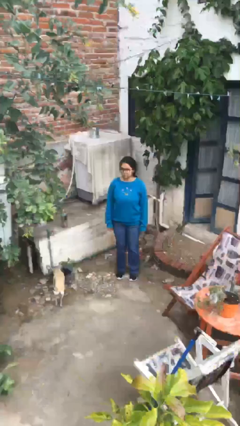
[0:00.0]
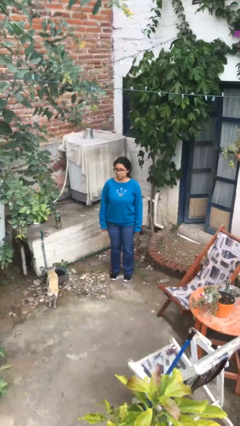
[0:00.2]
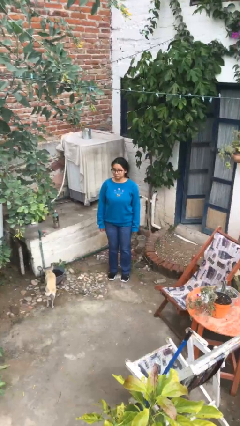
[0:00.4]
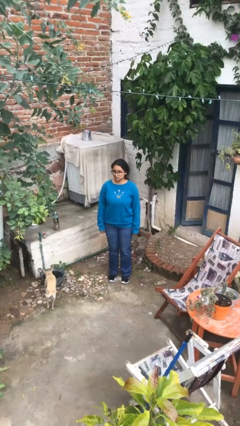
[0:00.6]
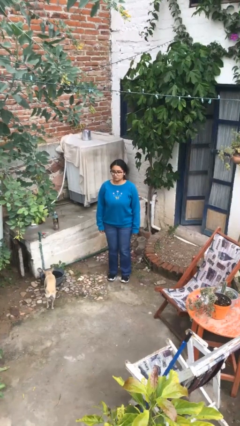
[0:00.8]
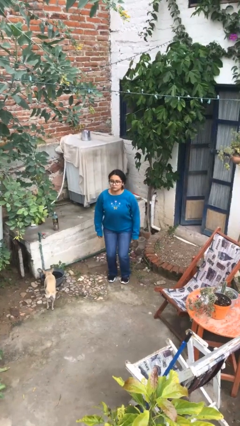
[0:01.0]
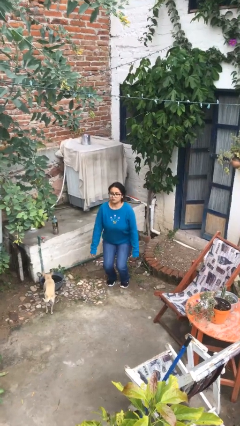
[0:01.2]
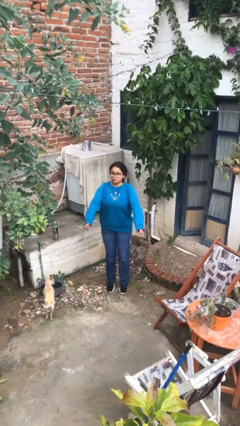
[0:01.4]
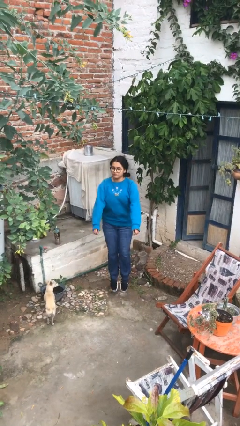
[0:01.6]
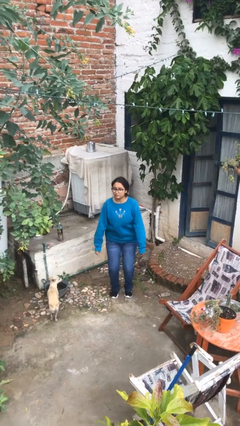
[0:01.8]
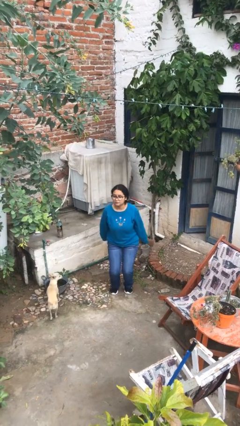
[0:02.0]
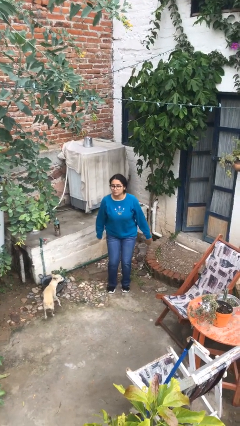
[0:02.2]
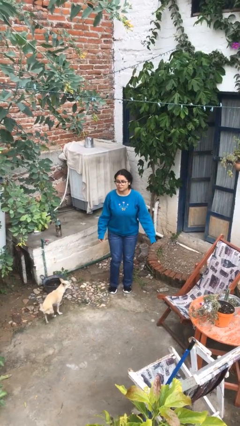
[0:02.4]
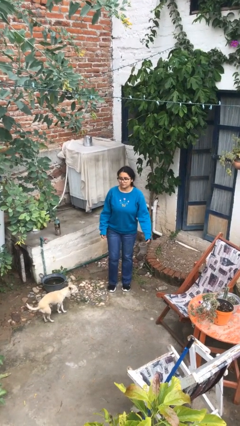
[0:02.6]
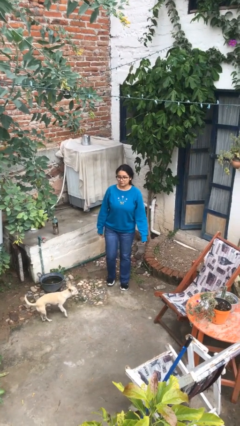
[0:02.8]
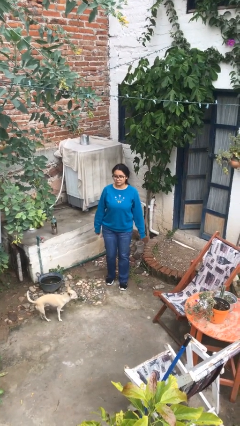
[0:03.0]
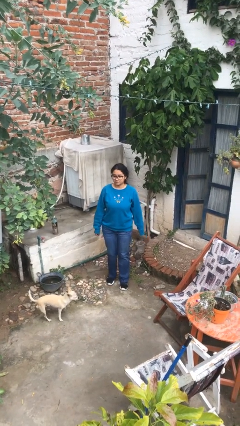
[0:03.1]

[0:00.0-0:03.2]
person jumps

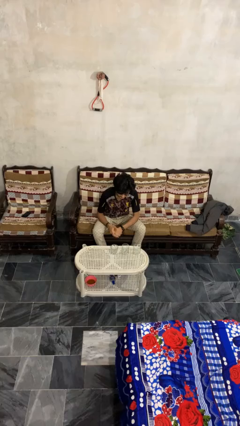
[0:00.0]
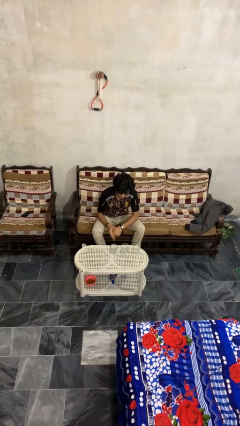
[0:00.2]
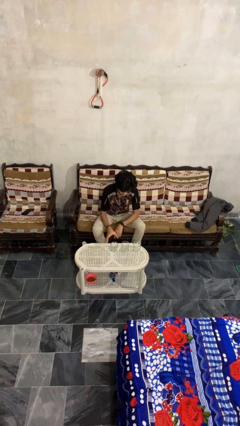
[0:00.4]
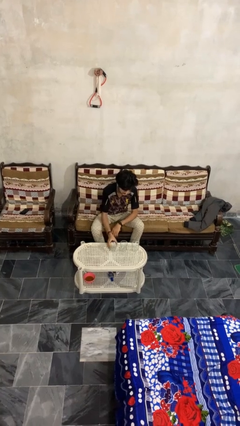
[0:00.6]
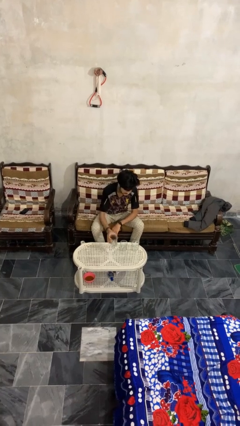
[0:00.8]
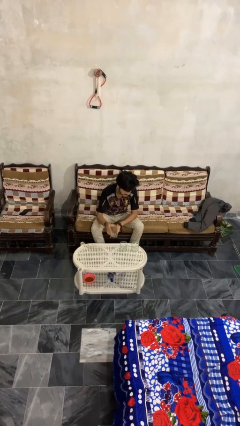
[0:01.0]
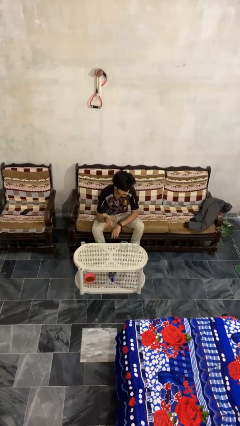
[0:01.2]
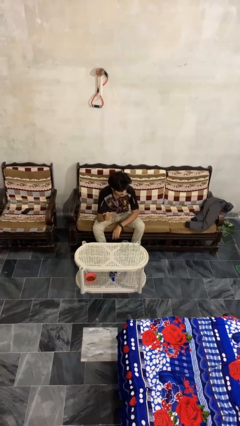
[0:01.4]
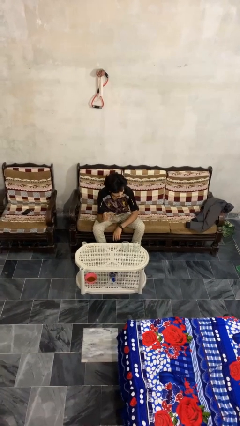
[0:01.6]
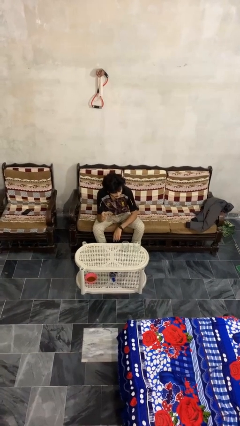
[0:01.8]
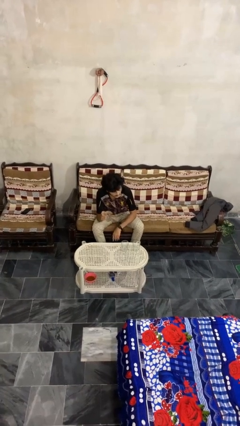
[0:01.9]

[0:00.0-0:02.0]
person picks up object from table

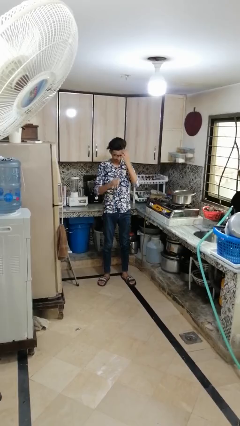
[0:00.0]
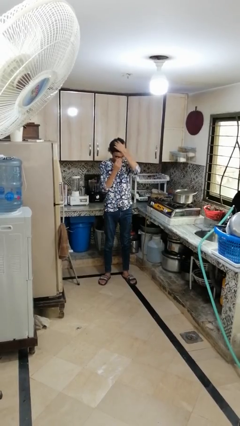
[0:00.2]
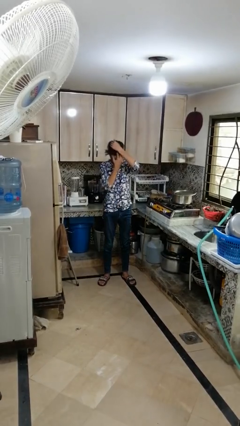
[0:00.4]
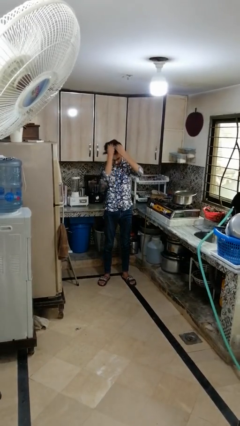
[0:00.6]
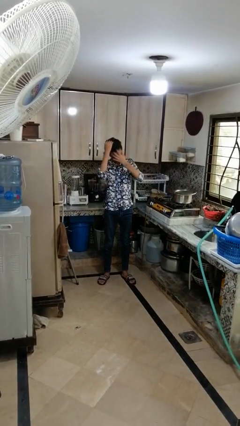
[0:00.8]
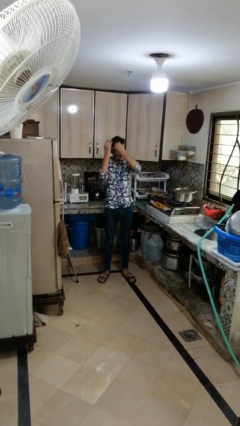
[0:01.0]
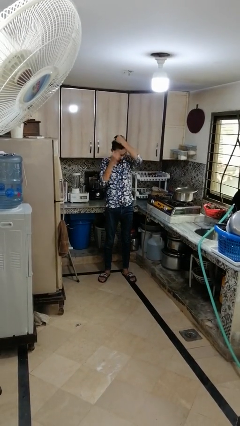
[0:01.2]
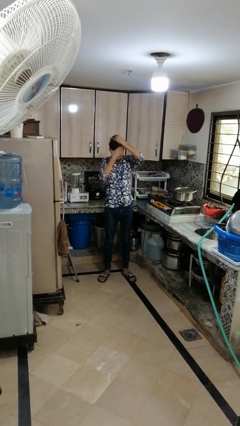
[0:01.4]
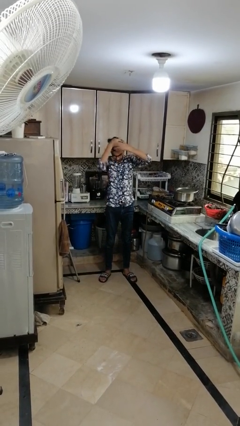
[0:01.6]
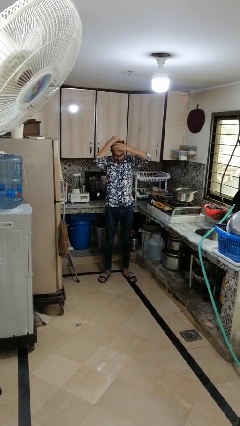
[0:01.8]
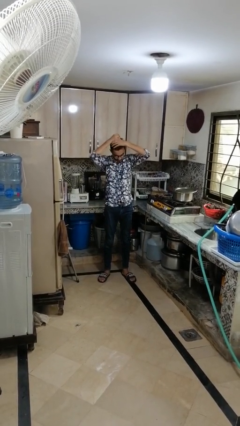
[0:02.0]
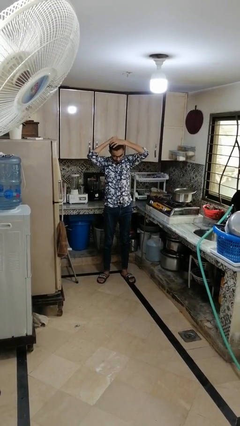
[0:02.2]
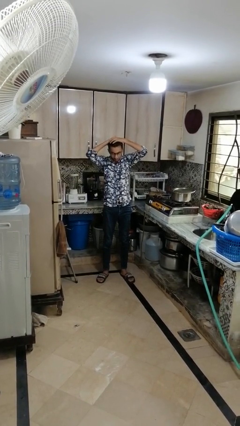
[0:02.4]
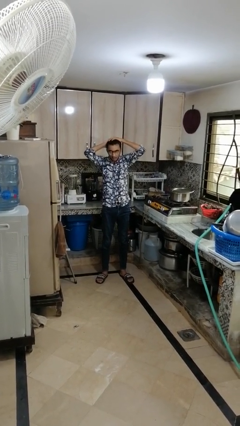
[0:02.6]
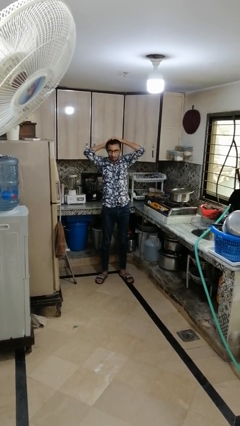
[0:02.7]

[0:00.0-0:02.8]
person strokes hair

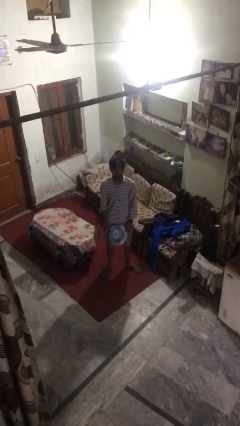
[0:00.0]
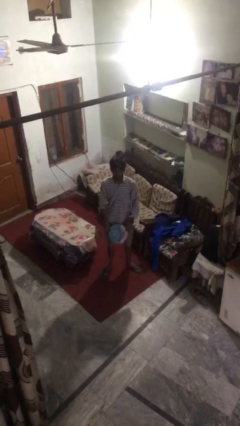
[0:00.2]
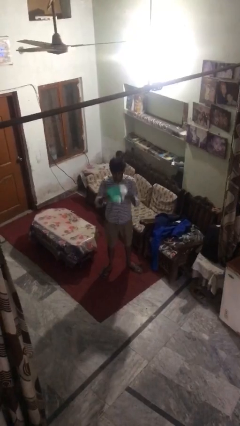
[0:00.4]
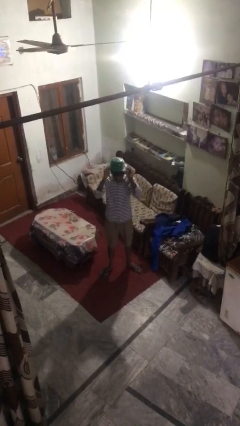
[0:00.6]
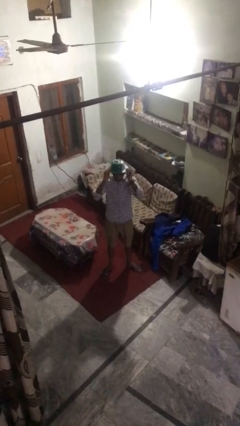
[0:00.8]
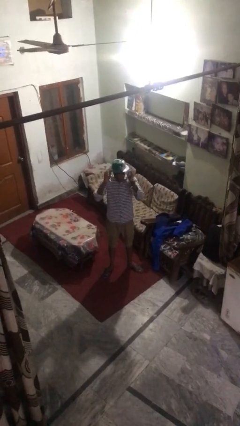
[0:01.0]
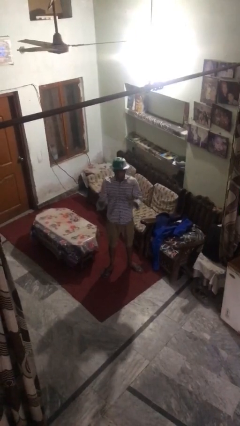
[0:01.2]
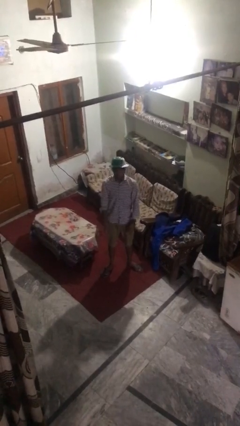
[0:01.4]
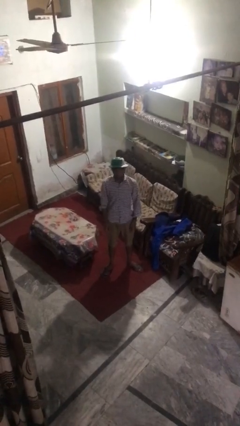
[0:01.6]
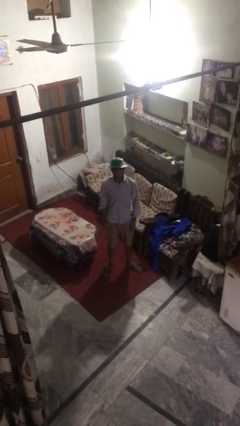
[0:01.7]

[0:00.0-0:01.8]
person puts on hat

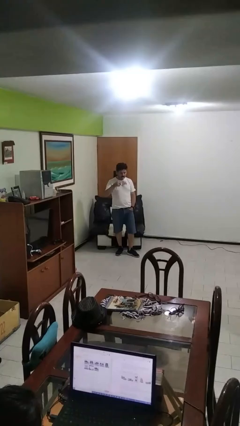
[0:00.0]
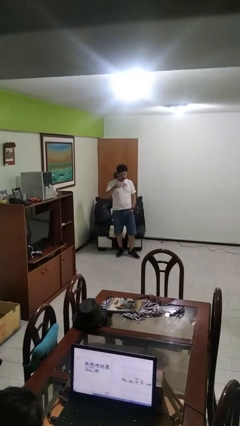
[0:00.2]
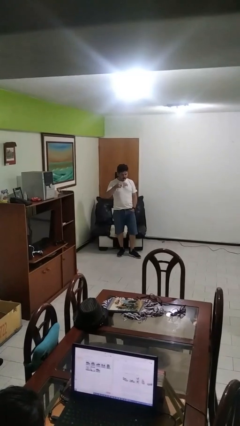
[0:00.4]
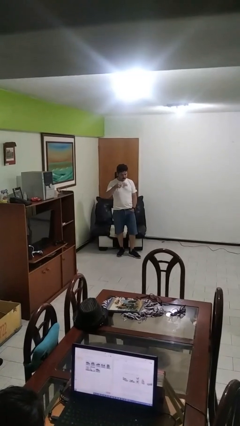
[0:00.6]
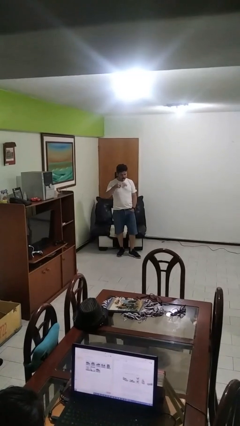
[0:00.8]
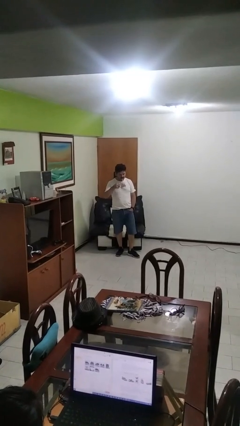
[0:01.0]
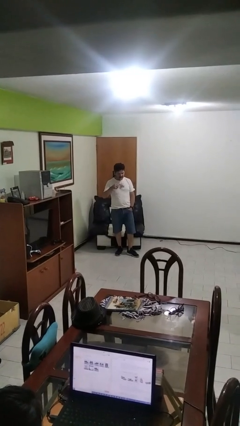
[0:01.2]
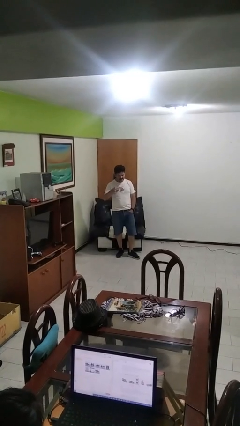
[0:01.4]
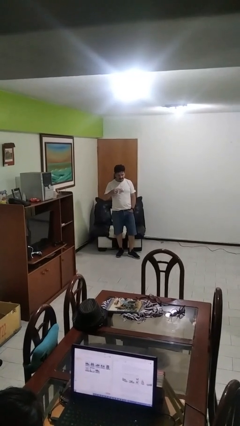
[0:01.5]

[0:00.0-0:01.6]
person drinks from straw

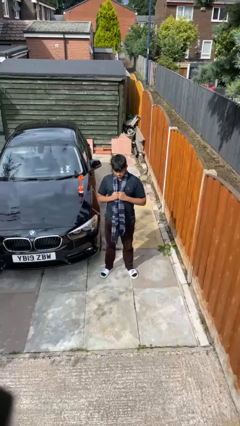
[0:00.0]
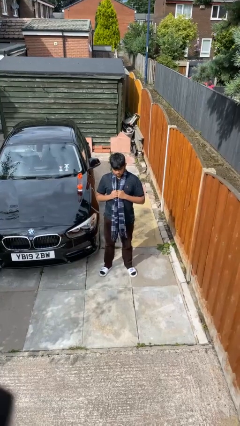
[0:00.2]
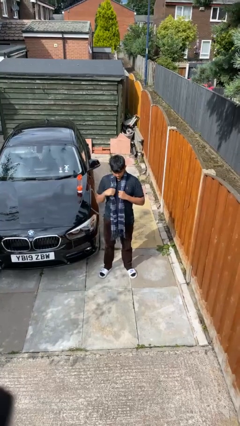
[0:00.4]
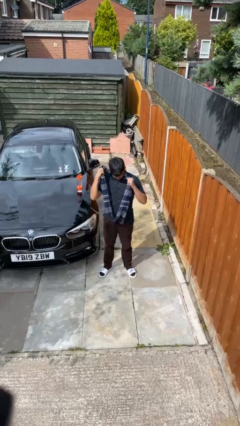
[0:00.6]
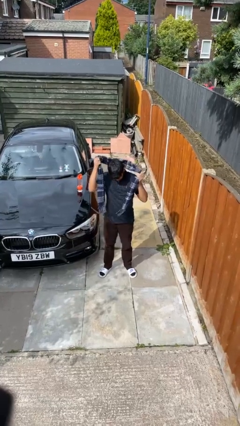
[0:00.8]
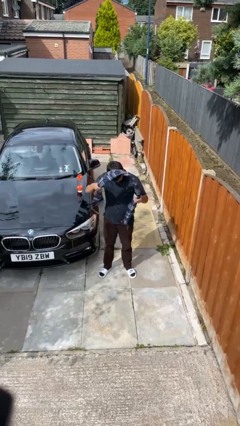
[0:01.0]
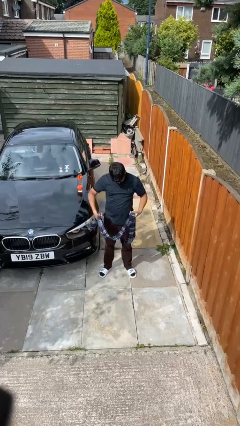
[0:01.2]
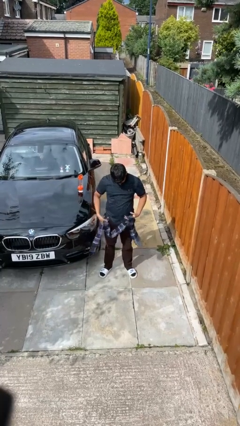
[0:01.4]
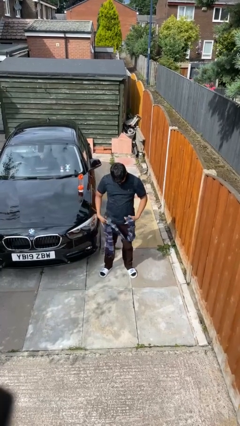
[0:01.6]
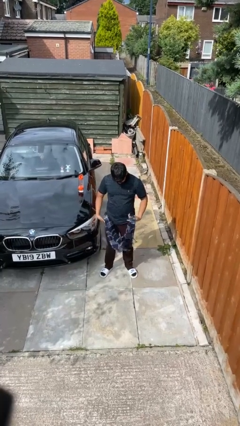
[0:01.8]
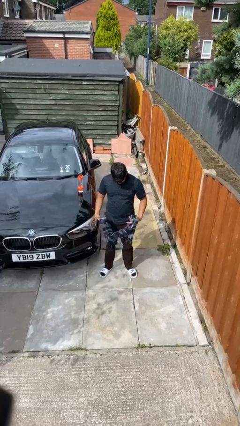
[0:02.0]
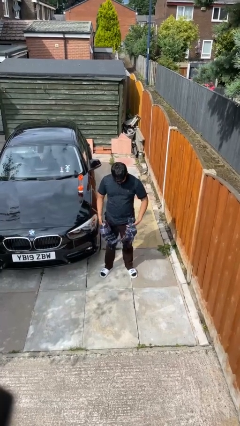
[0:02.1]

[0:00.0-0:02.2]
person takes off scarf

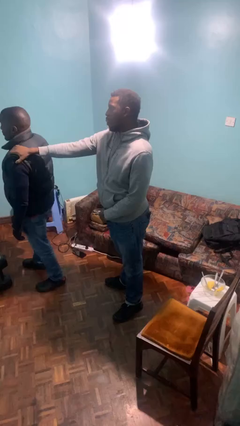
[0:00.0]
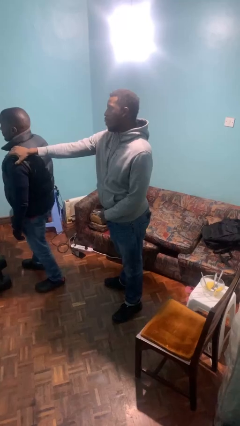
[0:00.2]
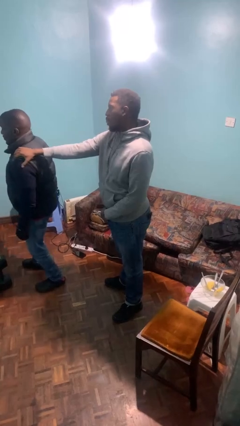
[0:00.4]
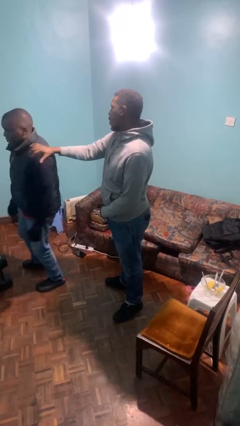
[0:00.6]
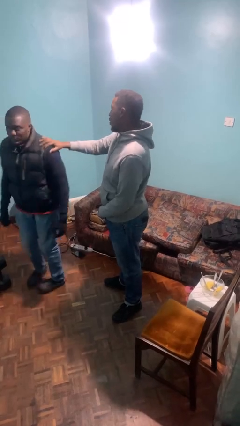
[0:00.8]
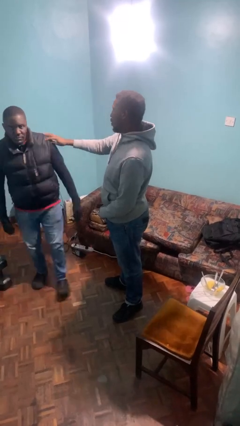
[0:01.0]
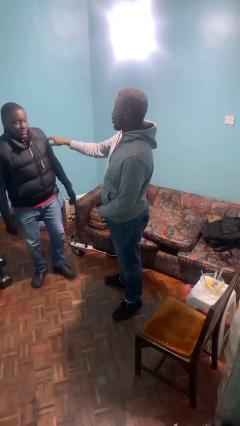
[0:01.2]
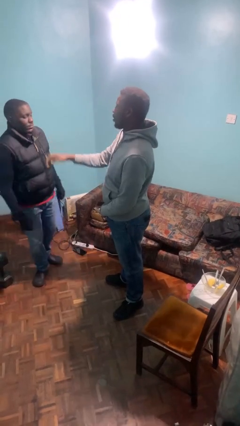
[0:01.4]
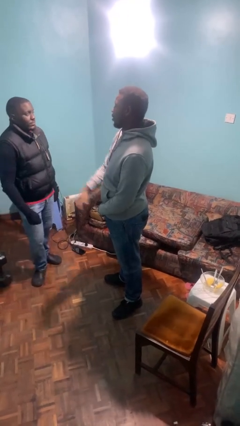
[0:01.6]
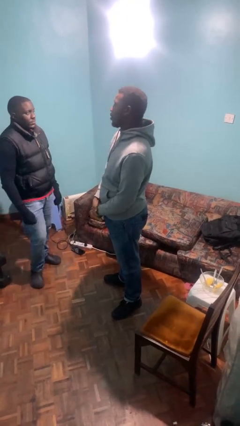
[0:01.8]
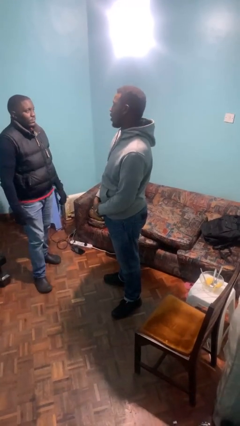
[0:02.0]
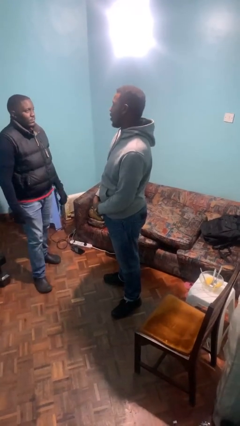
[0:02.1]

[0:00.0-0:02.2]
person spins person around

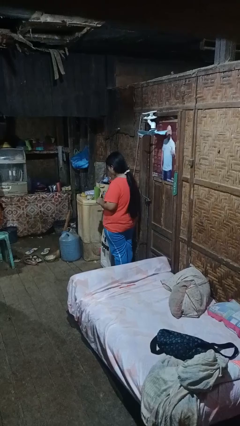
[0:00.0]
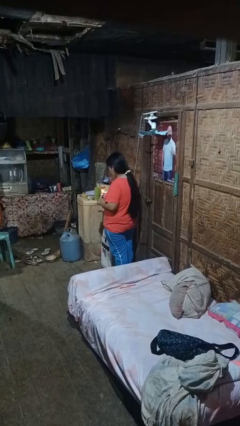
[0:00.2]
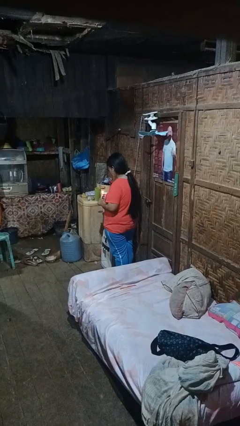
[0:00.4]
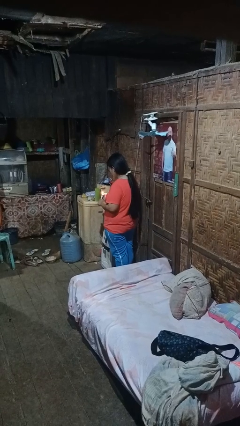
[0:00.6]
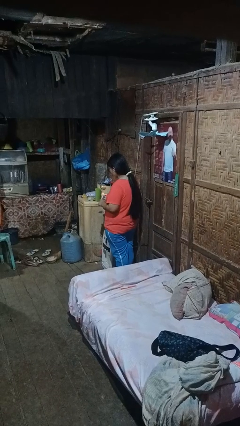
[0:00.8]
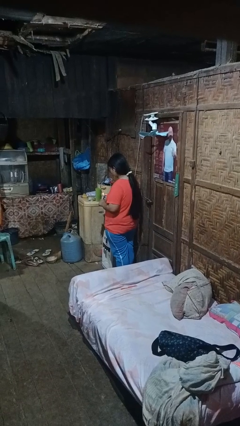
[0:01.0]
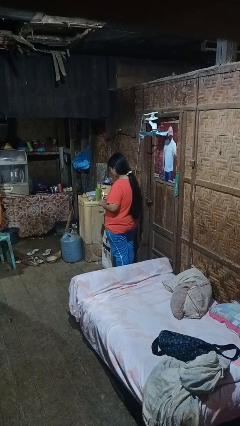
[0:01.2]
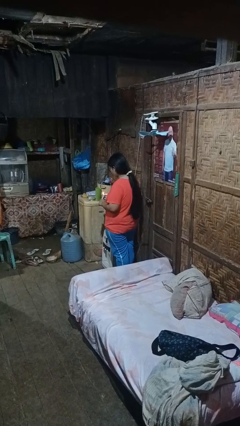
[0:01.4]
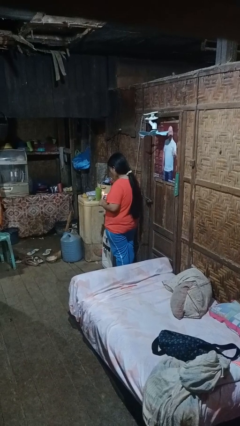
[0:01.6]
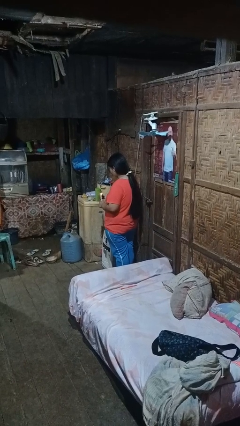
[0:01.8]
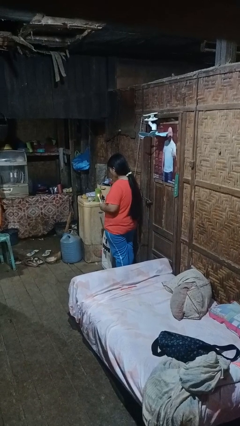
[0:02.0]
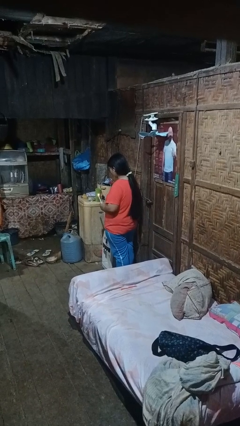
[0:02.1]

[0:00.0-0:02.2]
person lights candle
